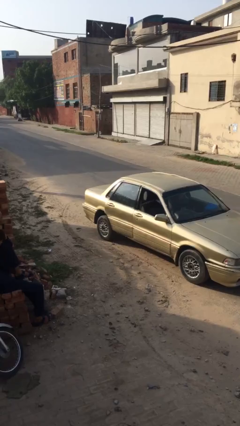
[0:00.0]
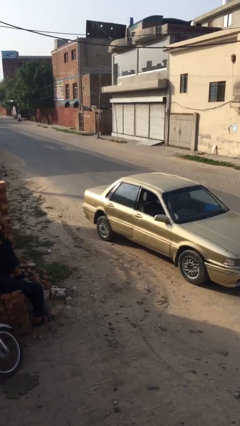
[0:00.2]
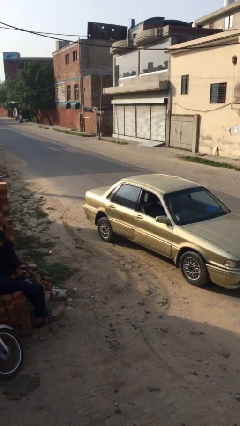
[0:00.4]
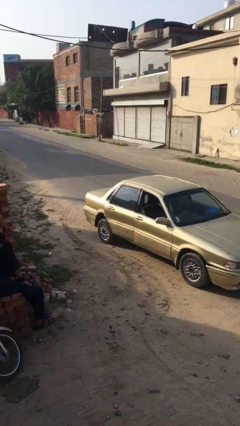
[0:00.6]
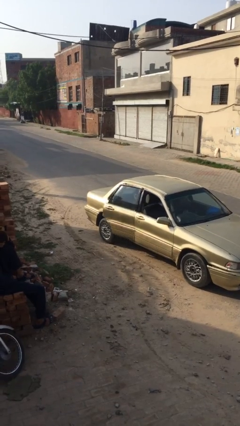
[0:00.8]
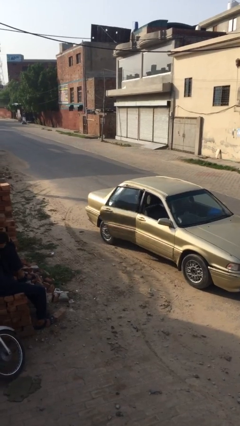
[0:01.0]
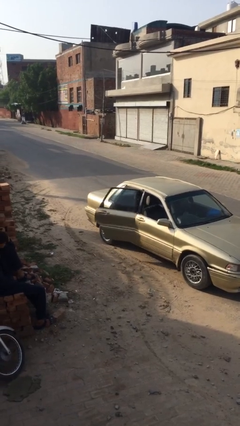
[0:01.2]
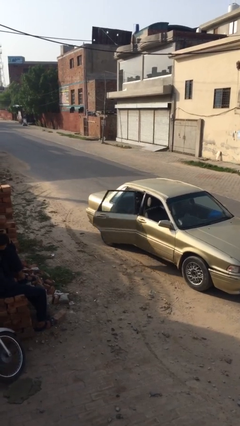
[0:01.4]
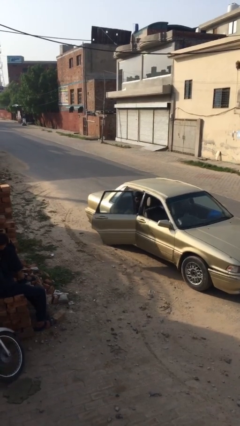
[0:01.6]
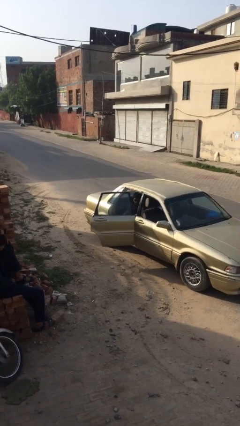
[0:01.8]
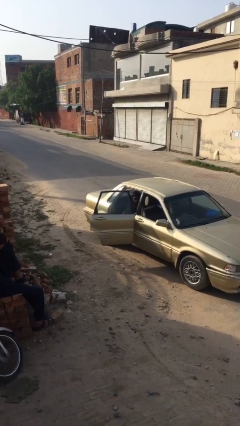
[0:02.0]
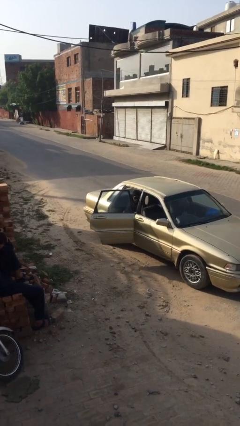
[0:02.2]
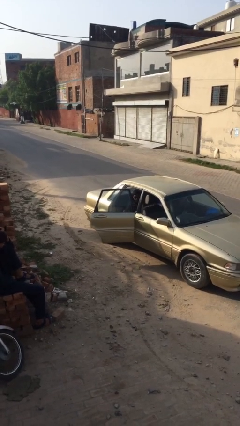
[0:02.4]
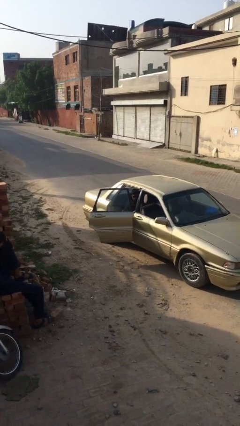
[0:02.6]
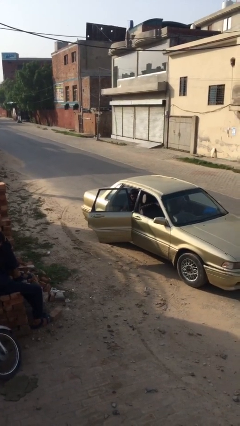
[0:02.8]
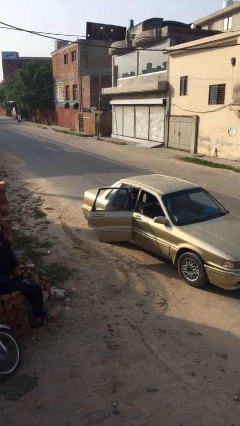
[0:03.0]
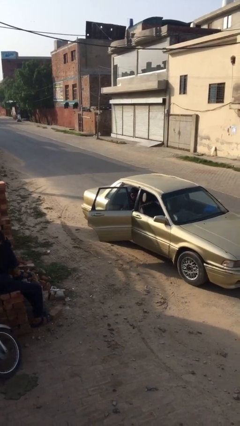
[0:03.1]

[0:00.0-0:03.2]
person opens car door

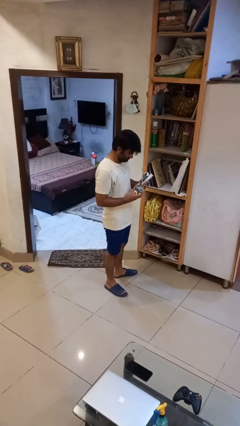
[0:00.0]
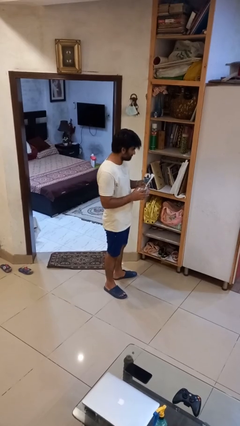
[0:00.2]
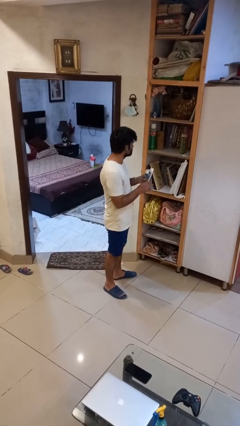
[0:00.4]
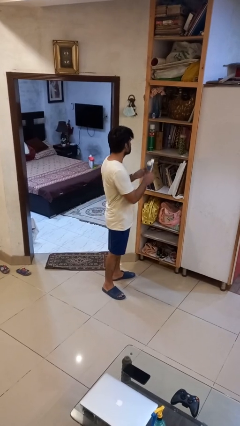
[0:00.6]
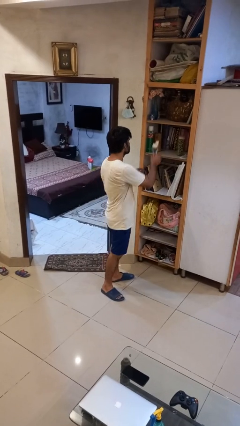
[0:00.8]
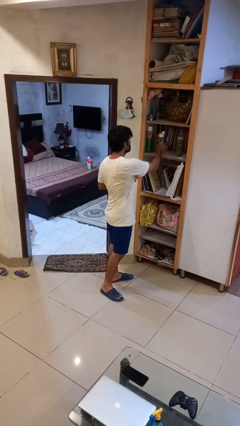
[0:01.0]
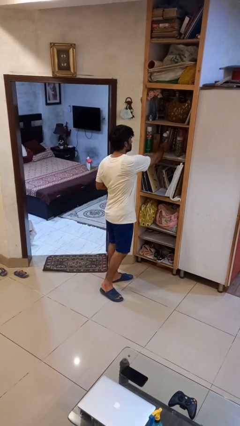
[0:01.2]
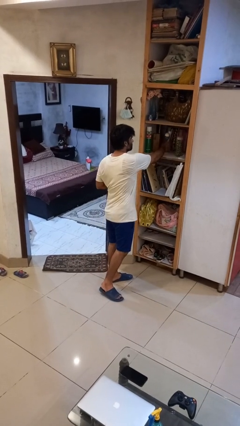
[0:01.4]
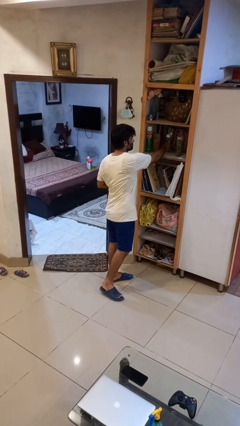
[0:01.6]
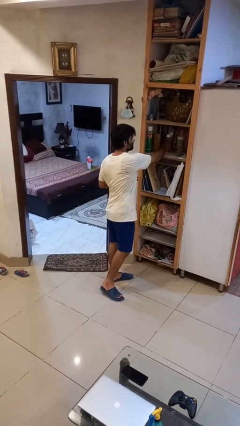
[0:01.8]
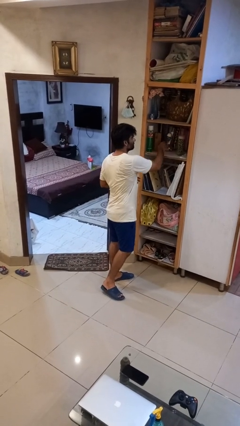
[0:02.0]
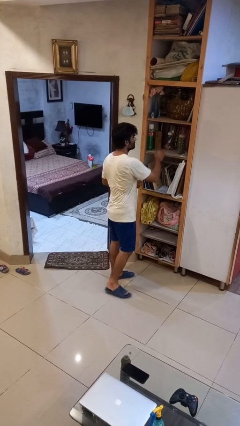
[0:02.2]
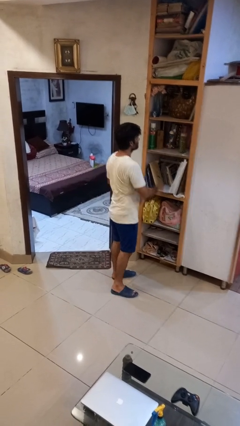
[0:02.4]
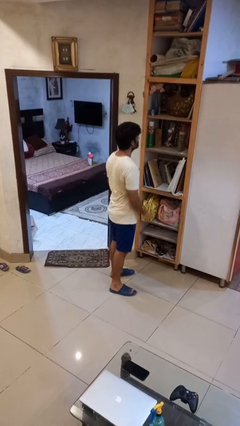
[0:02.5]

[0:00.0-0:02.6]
person puts down object into cabinet

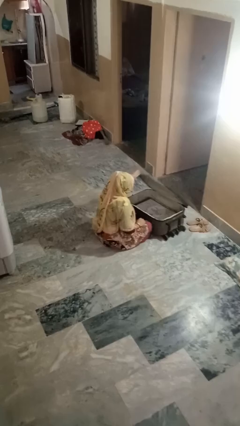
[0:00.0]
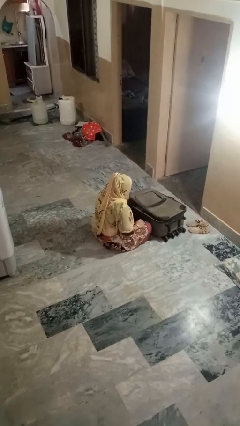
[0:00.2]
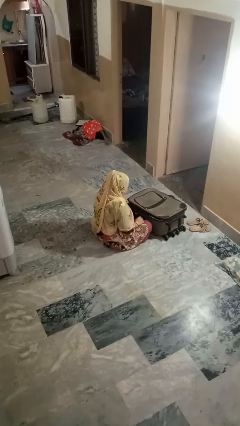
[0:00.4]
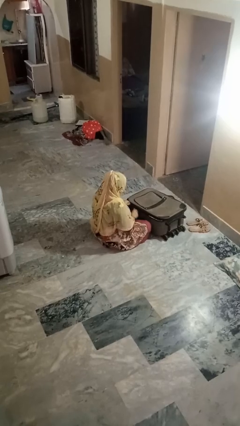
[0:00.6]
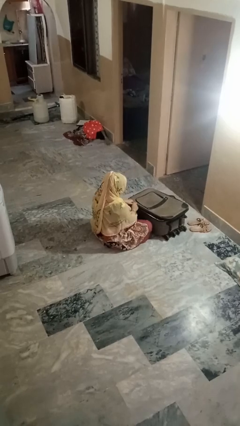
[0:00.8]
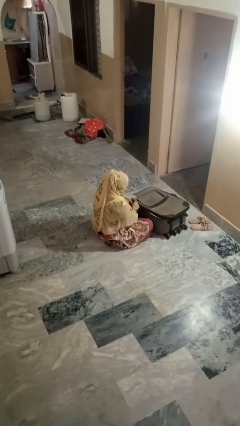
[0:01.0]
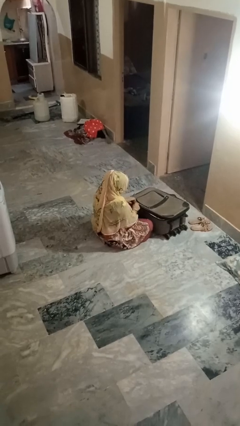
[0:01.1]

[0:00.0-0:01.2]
person closes suitcase

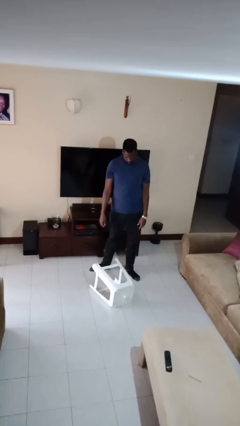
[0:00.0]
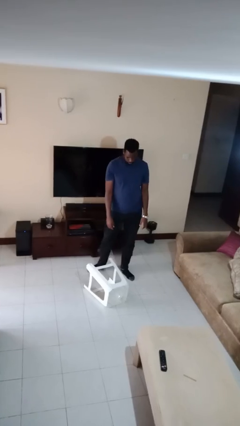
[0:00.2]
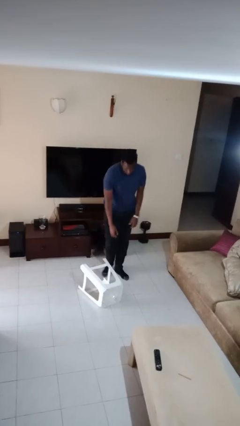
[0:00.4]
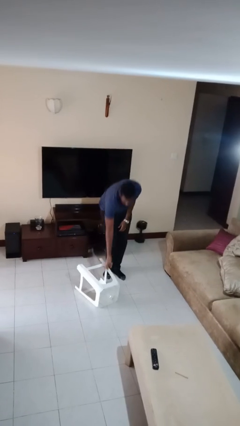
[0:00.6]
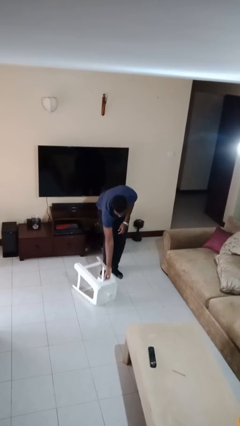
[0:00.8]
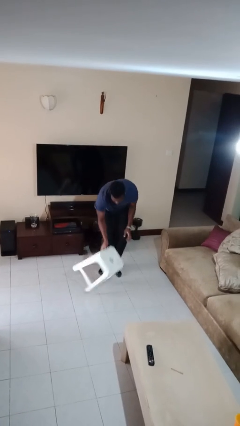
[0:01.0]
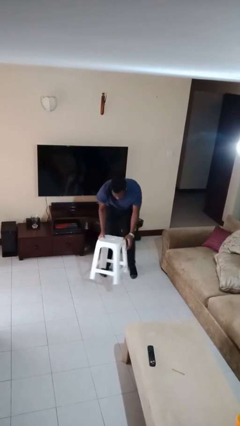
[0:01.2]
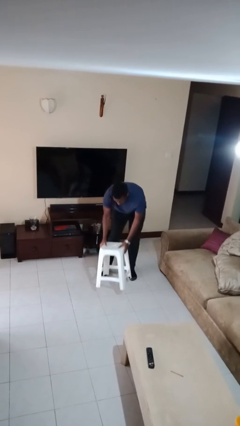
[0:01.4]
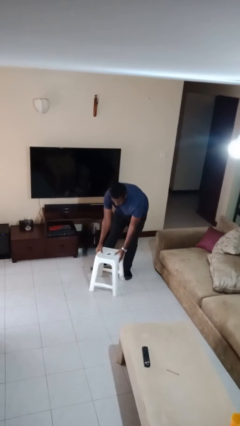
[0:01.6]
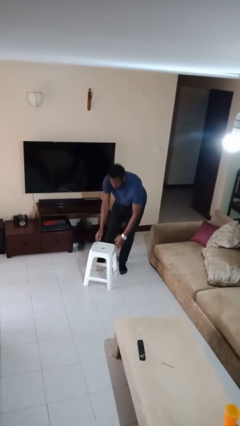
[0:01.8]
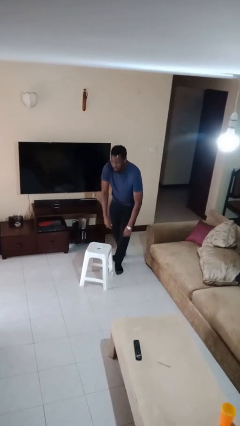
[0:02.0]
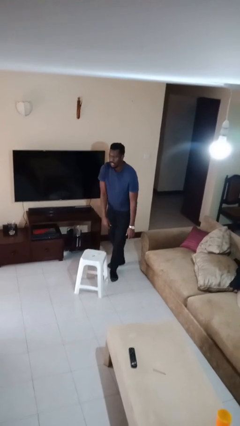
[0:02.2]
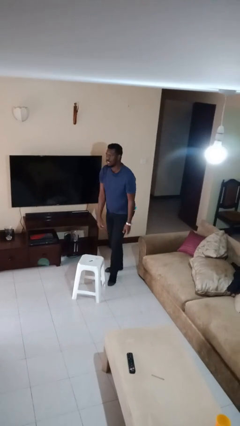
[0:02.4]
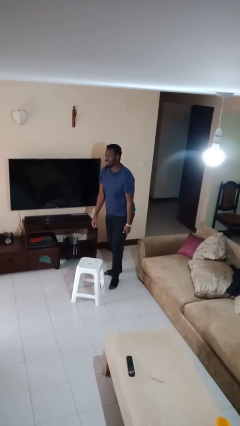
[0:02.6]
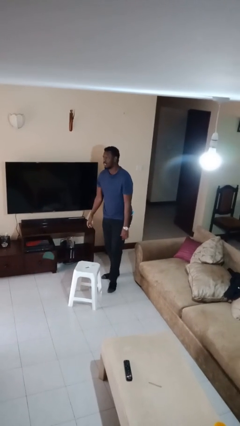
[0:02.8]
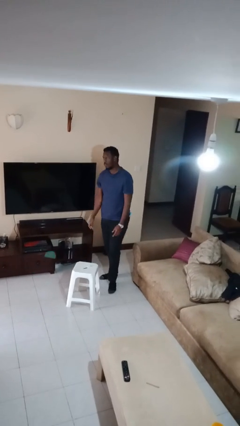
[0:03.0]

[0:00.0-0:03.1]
person sets upright furniture

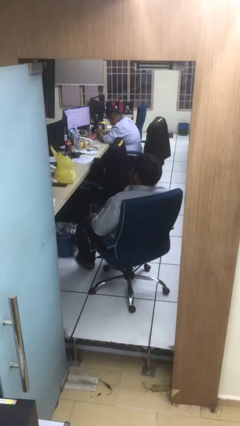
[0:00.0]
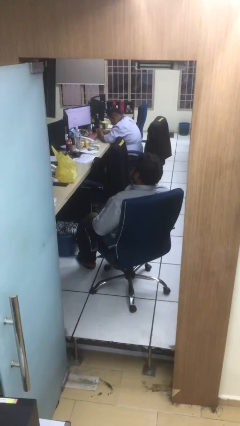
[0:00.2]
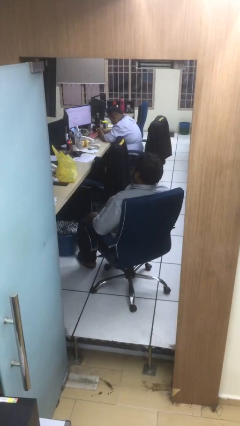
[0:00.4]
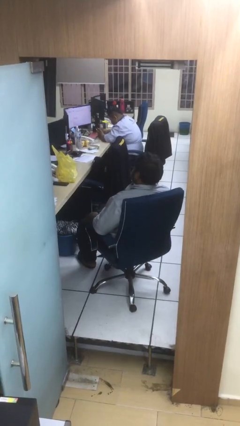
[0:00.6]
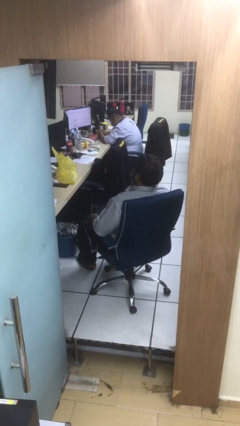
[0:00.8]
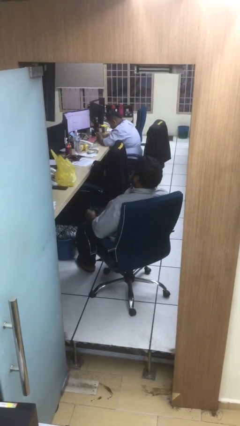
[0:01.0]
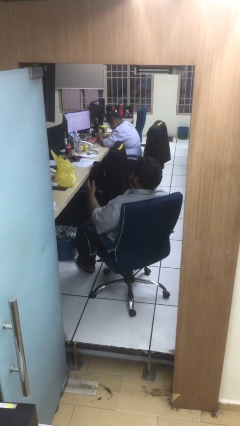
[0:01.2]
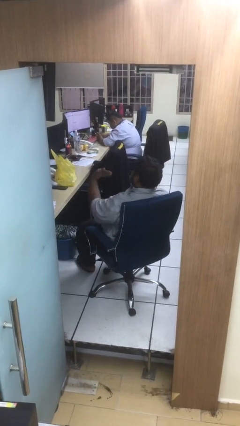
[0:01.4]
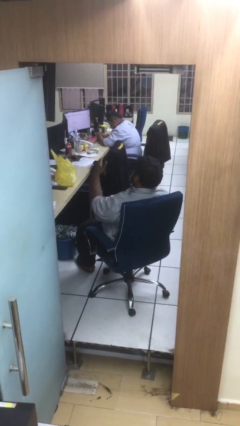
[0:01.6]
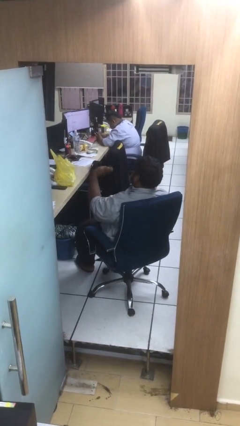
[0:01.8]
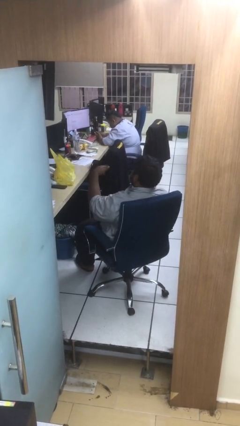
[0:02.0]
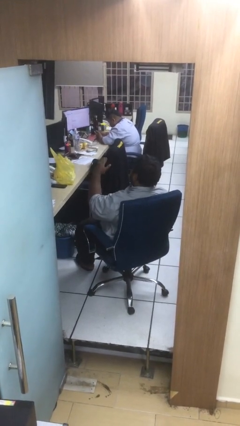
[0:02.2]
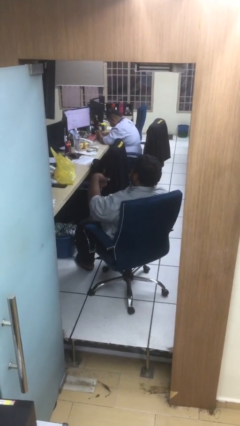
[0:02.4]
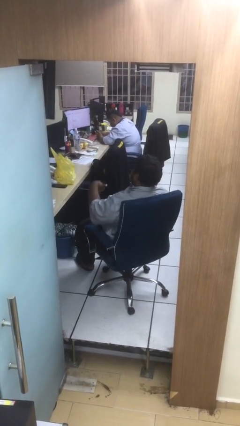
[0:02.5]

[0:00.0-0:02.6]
person gestures come here

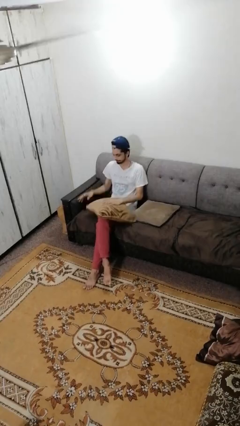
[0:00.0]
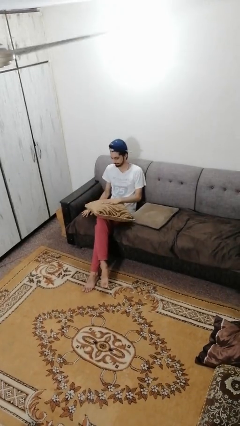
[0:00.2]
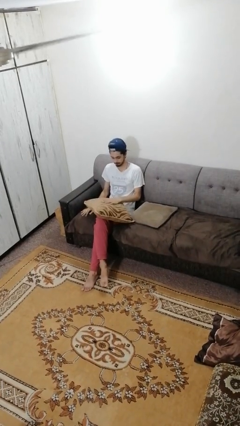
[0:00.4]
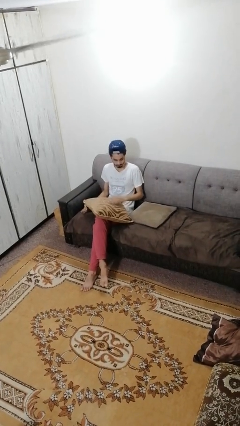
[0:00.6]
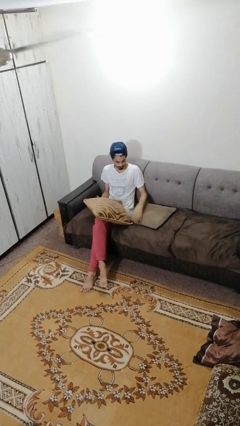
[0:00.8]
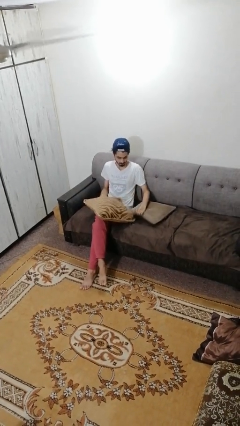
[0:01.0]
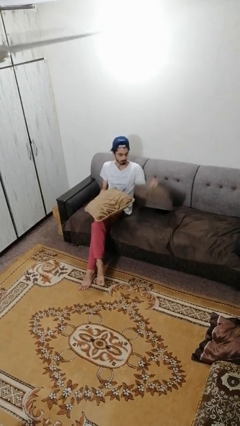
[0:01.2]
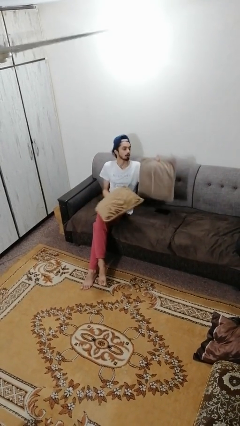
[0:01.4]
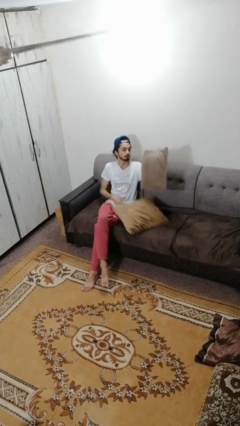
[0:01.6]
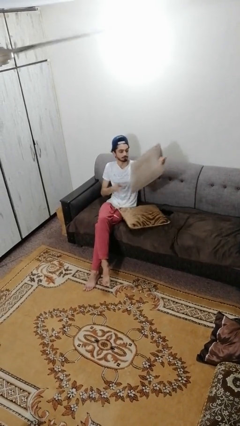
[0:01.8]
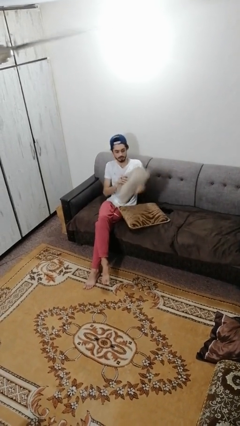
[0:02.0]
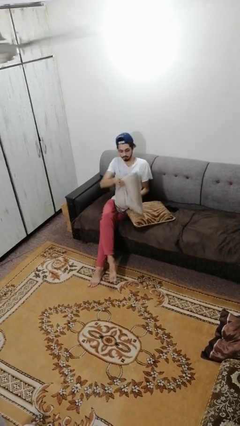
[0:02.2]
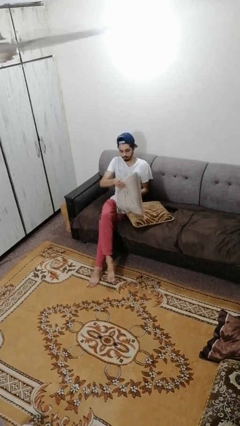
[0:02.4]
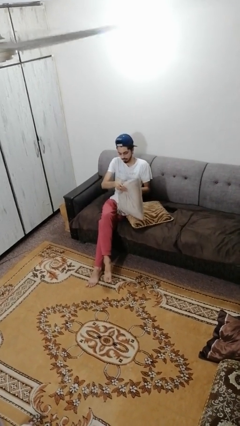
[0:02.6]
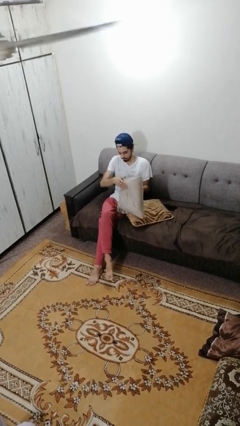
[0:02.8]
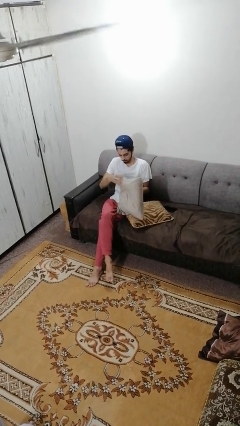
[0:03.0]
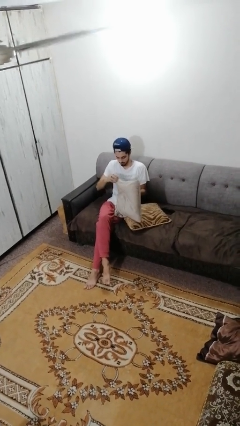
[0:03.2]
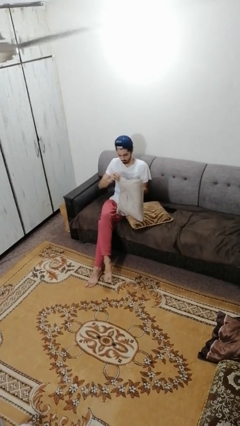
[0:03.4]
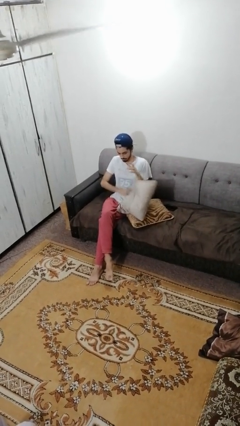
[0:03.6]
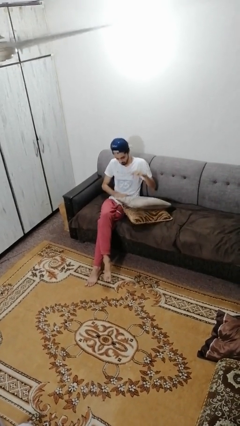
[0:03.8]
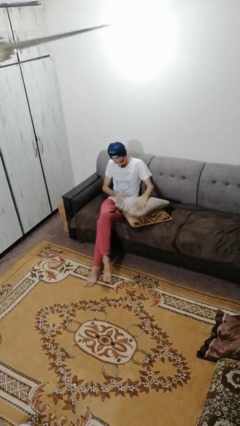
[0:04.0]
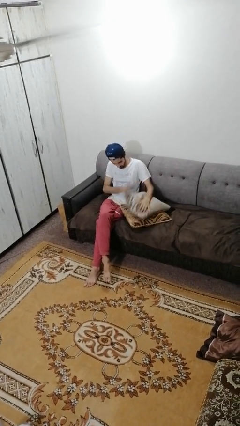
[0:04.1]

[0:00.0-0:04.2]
person searches in couch

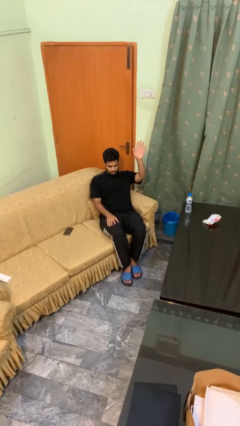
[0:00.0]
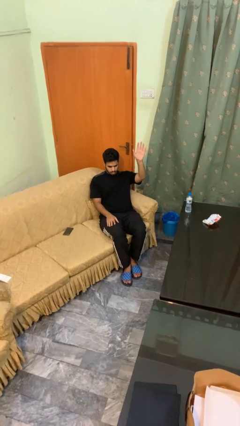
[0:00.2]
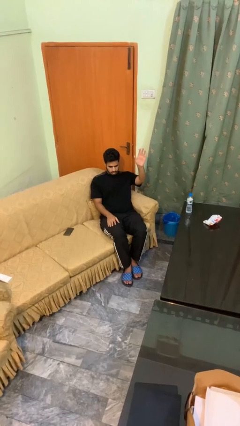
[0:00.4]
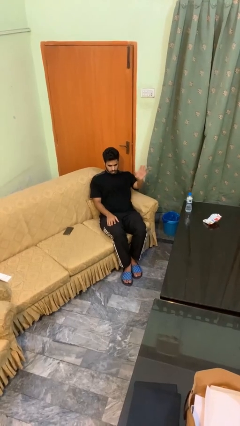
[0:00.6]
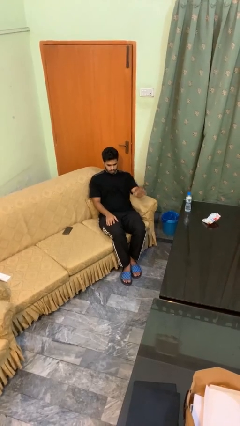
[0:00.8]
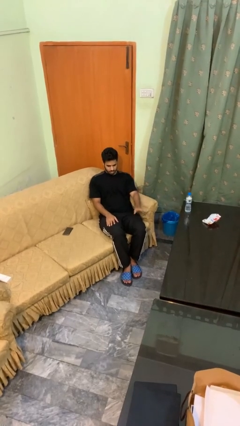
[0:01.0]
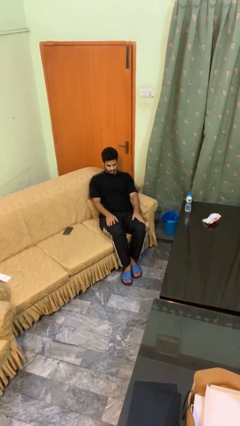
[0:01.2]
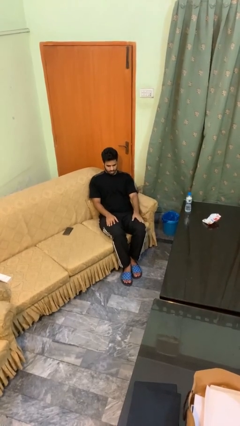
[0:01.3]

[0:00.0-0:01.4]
person gestures lower hand
